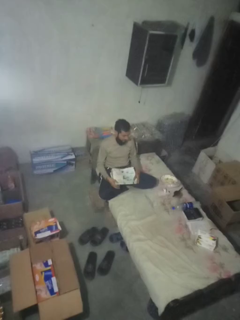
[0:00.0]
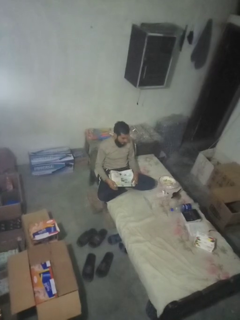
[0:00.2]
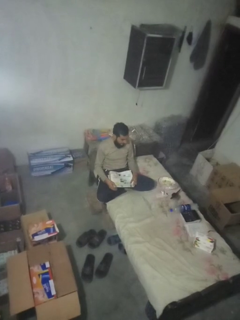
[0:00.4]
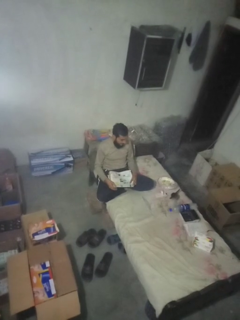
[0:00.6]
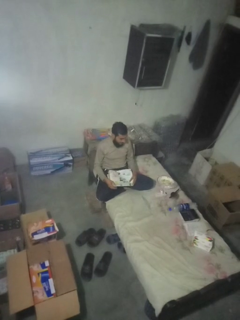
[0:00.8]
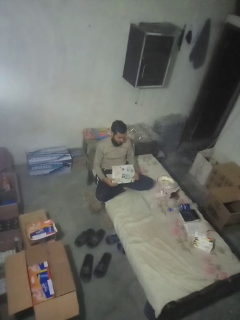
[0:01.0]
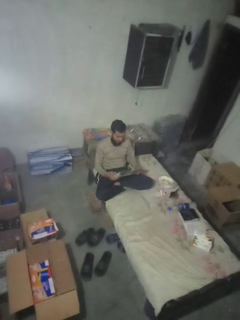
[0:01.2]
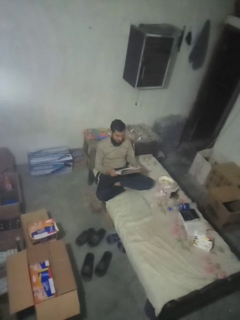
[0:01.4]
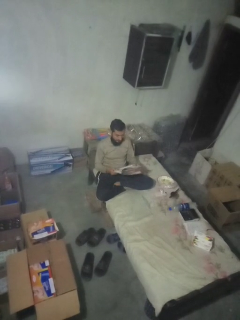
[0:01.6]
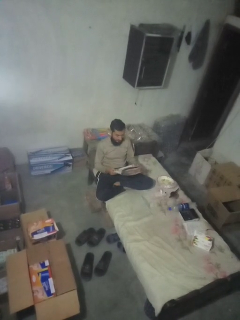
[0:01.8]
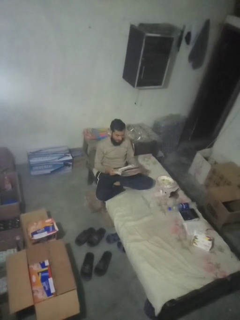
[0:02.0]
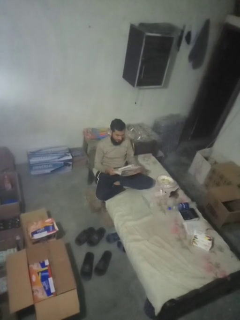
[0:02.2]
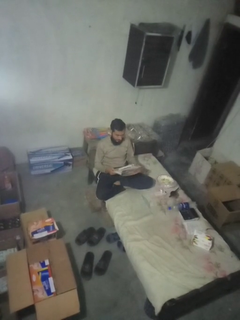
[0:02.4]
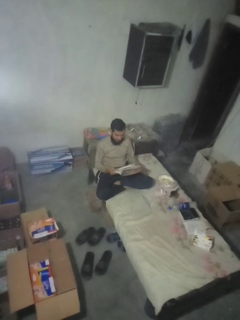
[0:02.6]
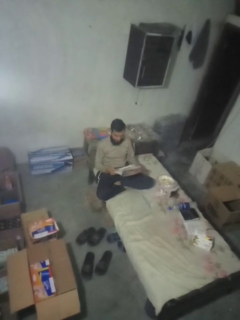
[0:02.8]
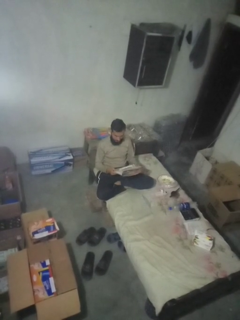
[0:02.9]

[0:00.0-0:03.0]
person reads magazine

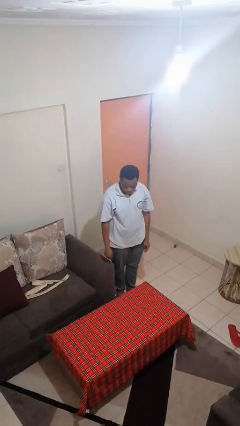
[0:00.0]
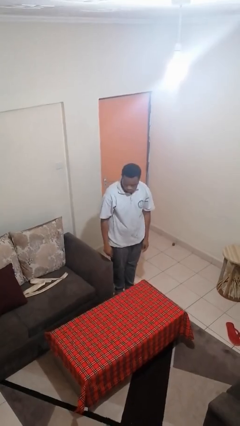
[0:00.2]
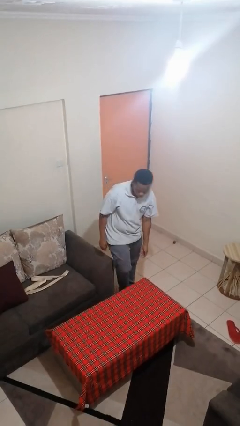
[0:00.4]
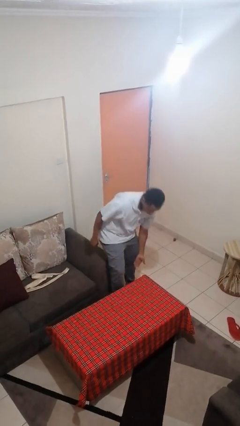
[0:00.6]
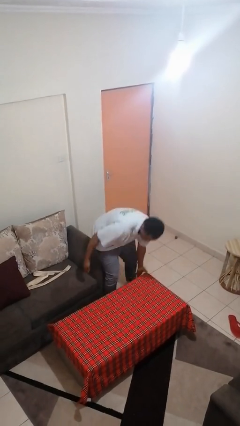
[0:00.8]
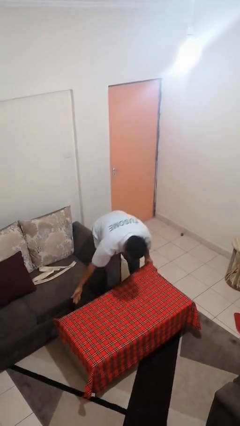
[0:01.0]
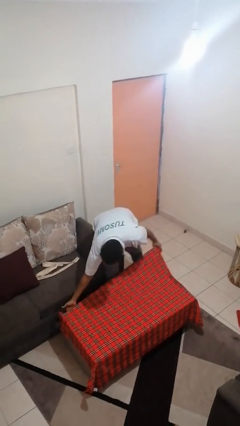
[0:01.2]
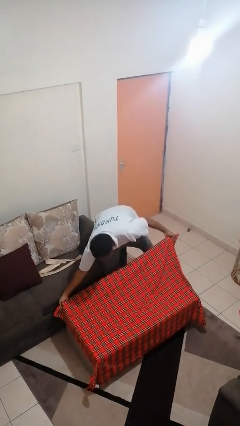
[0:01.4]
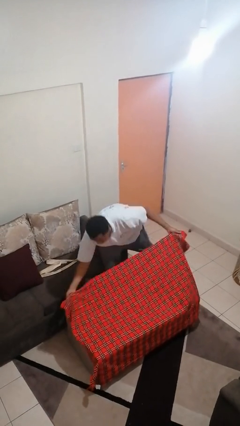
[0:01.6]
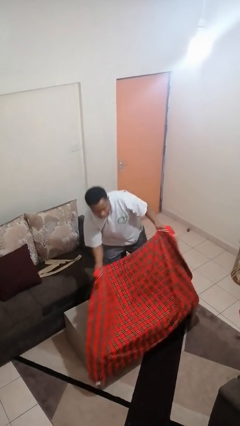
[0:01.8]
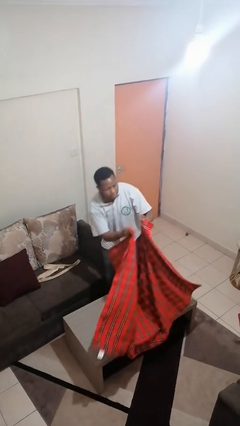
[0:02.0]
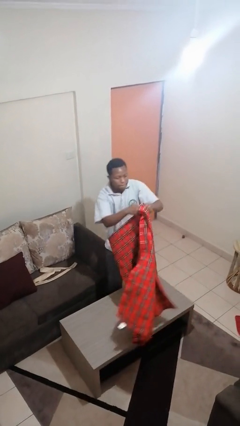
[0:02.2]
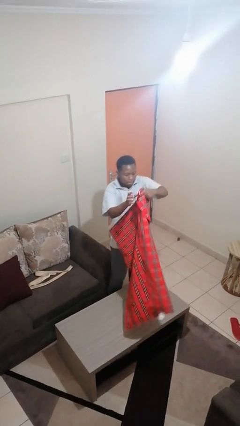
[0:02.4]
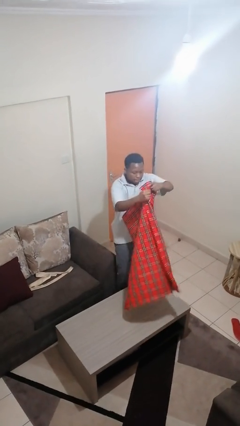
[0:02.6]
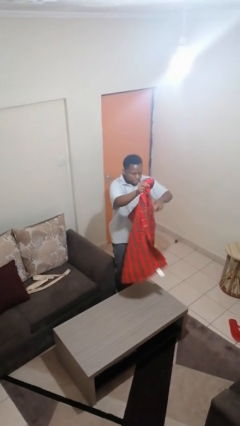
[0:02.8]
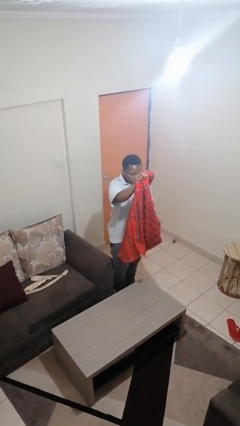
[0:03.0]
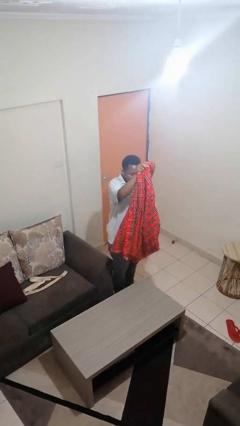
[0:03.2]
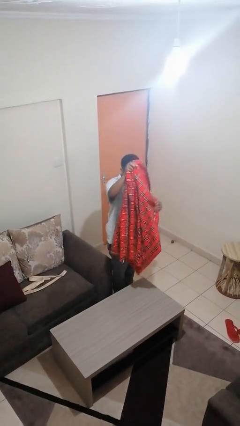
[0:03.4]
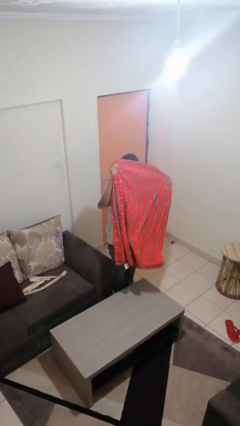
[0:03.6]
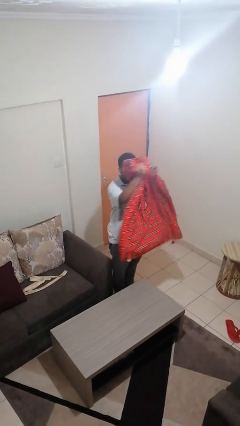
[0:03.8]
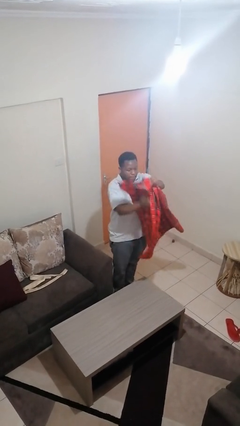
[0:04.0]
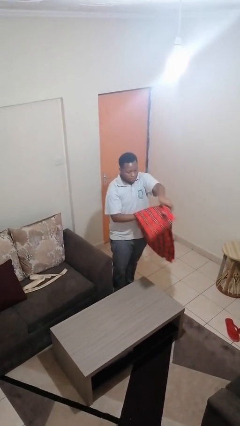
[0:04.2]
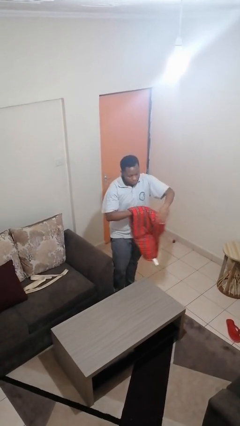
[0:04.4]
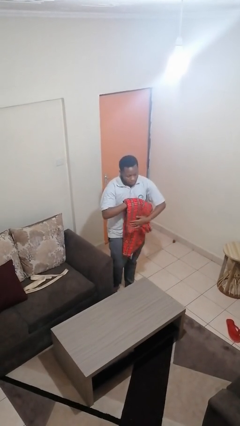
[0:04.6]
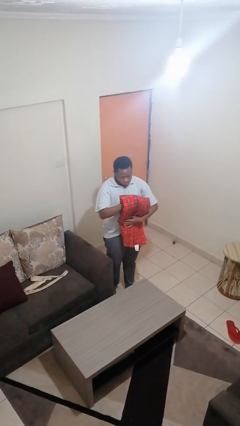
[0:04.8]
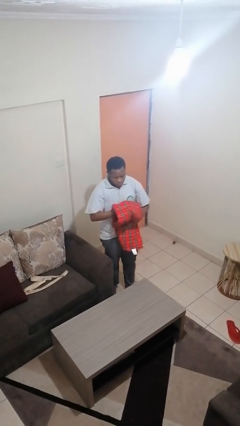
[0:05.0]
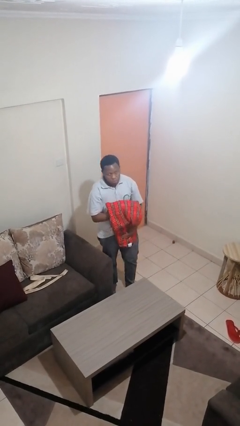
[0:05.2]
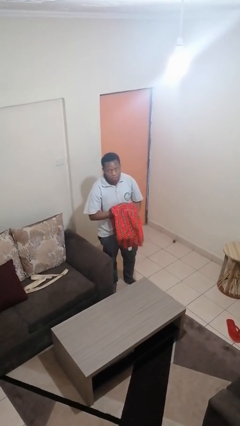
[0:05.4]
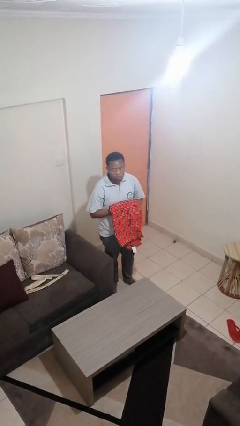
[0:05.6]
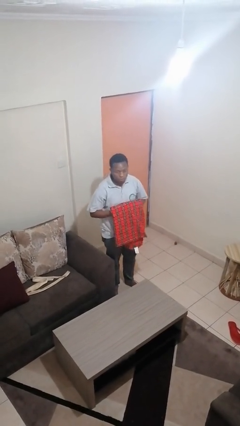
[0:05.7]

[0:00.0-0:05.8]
person folds tablecloth

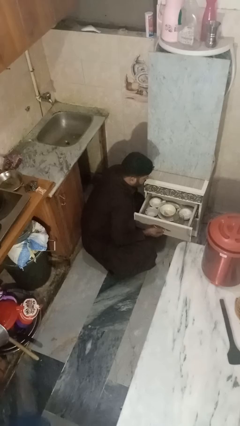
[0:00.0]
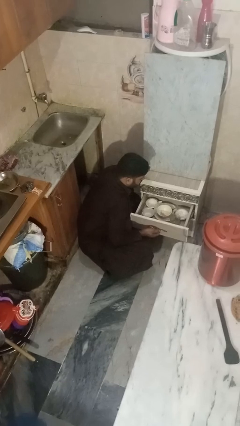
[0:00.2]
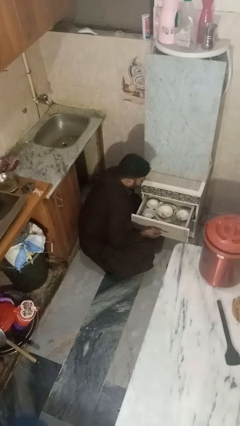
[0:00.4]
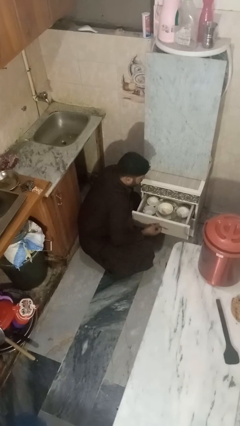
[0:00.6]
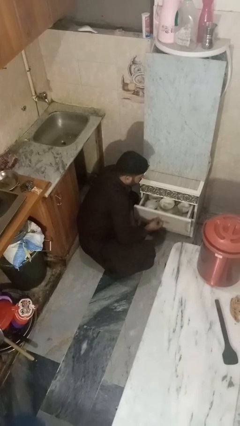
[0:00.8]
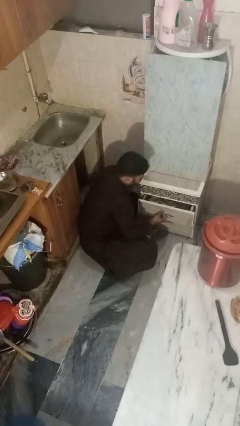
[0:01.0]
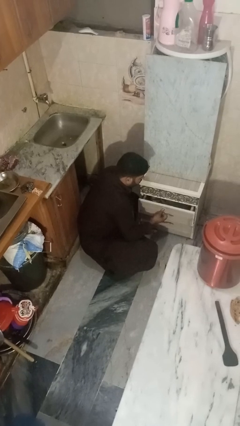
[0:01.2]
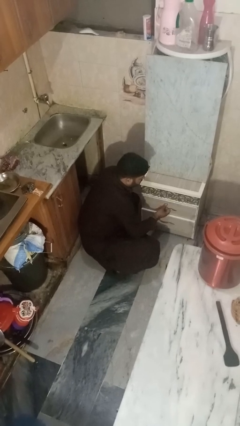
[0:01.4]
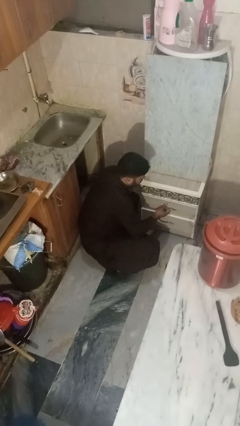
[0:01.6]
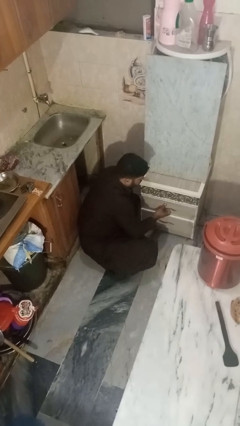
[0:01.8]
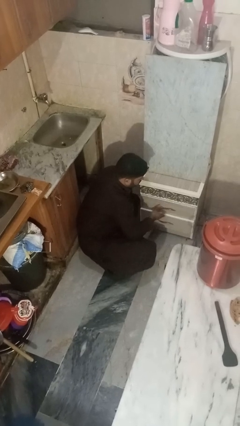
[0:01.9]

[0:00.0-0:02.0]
person closes kitchen drawer

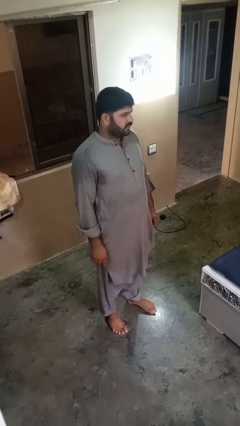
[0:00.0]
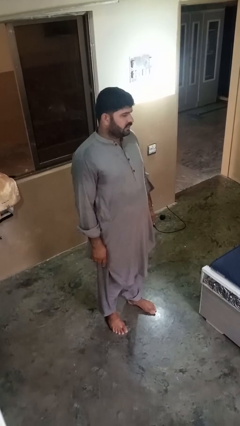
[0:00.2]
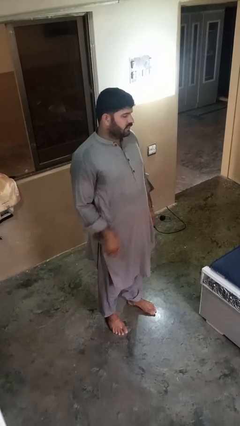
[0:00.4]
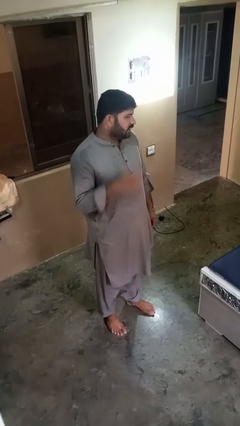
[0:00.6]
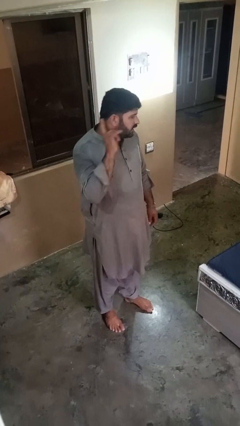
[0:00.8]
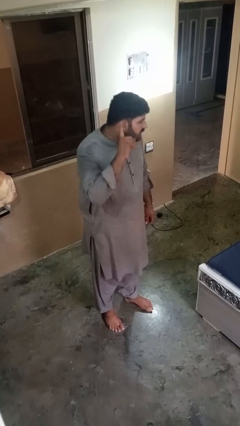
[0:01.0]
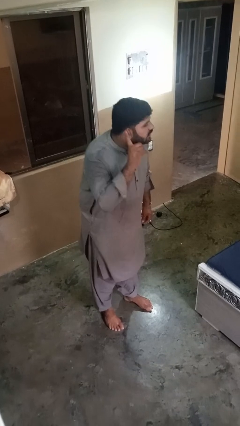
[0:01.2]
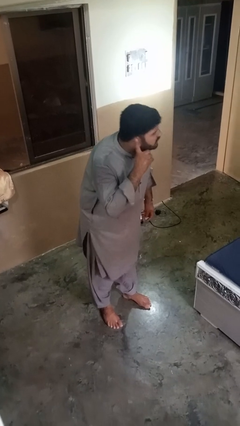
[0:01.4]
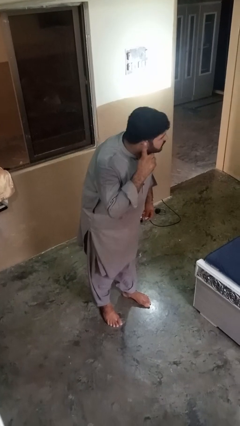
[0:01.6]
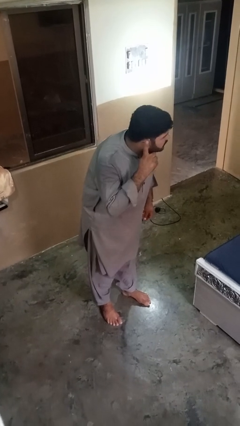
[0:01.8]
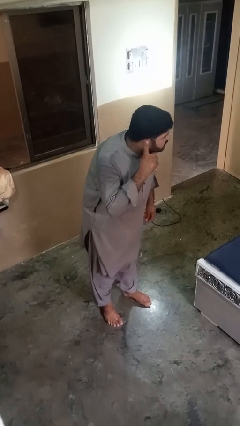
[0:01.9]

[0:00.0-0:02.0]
person gestures listen closely

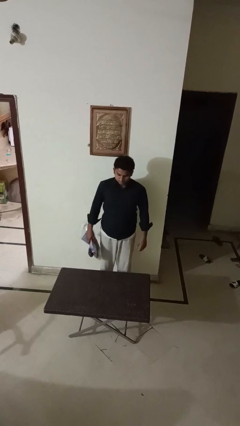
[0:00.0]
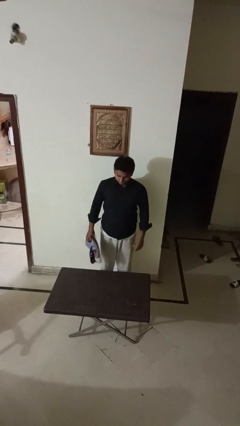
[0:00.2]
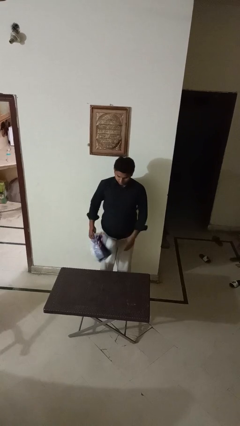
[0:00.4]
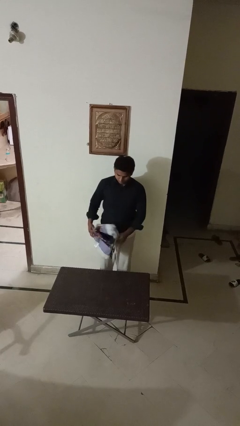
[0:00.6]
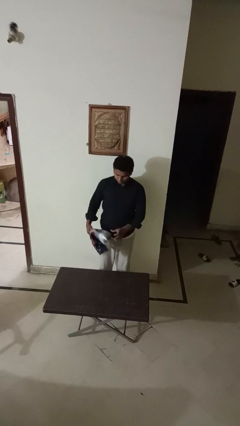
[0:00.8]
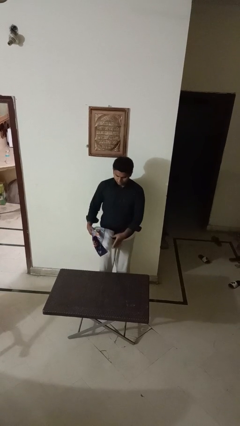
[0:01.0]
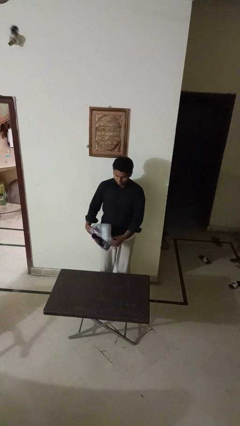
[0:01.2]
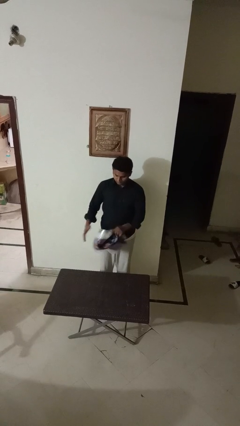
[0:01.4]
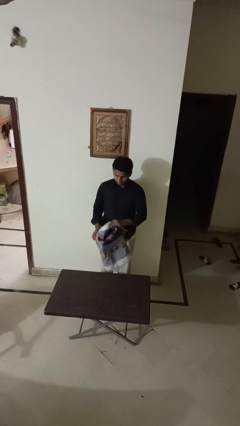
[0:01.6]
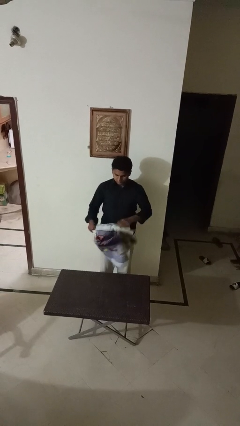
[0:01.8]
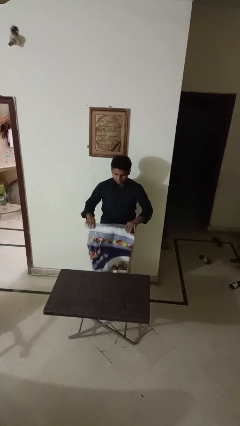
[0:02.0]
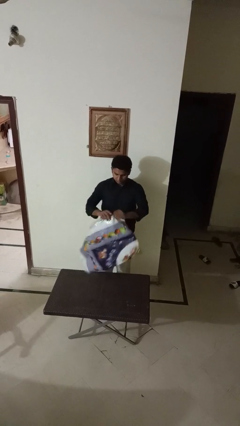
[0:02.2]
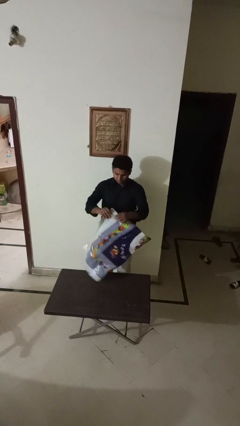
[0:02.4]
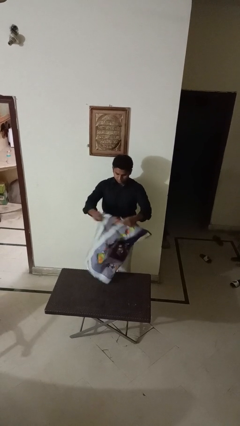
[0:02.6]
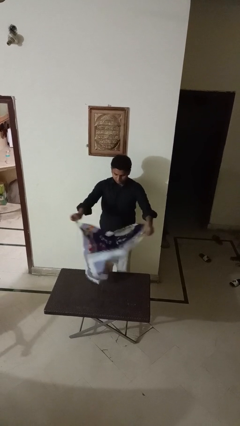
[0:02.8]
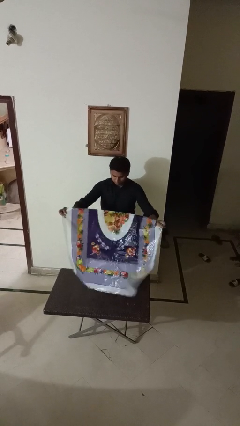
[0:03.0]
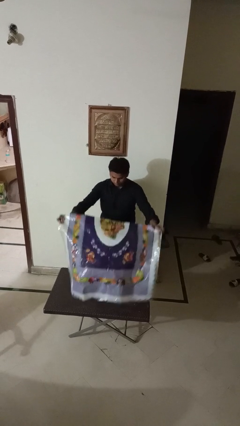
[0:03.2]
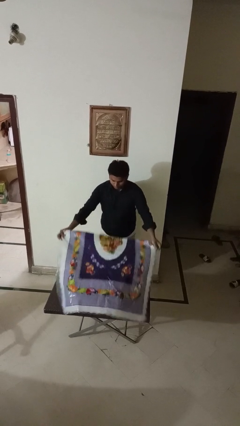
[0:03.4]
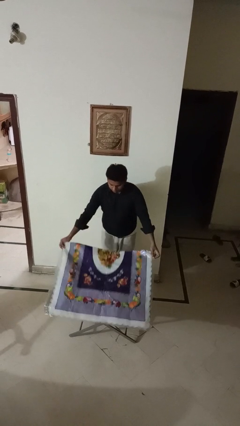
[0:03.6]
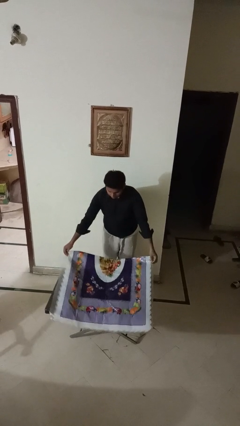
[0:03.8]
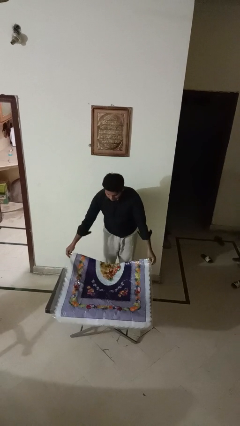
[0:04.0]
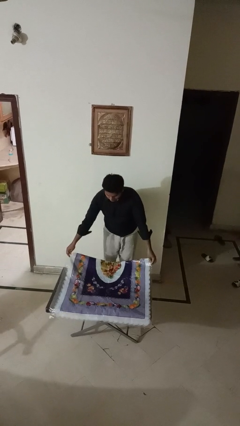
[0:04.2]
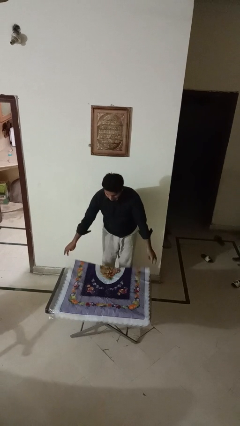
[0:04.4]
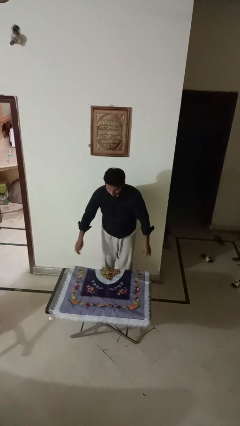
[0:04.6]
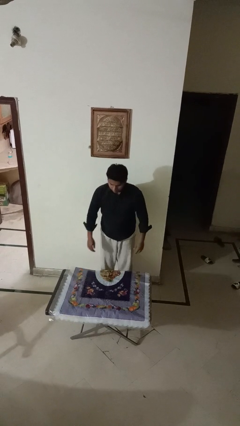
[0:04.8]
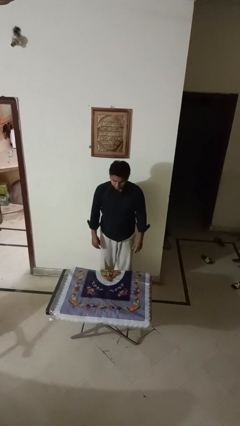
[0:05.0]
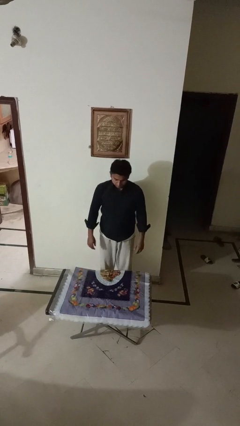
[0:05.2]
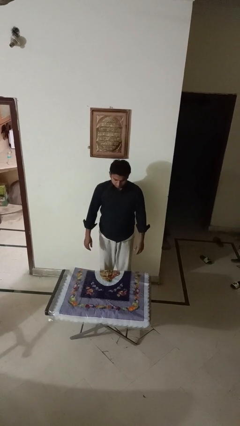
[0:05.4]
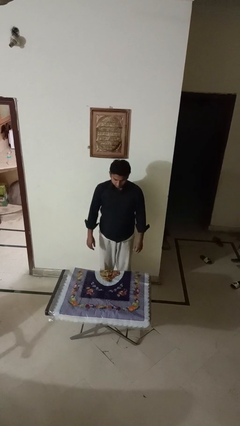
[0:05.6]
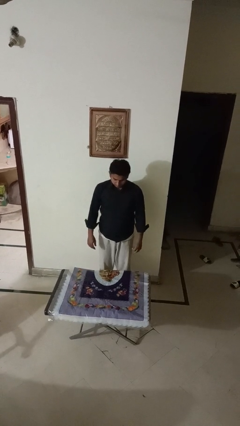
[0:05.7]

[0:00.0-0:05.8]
person spreads tablecloth
